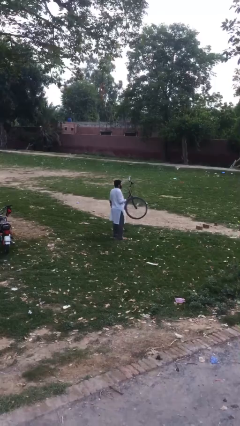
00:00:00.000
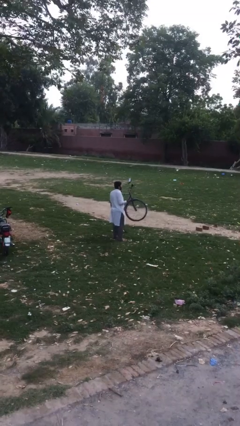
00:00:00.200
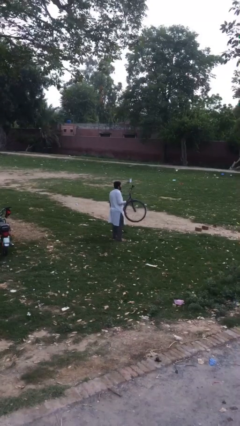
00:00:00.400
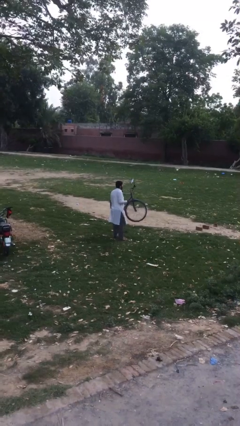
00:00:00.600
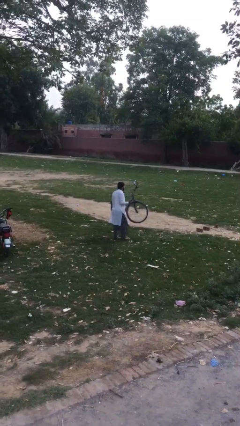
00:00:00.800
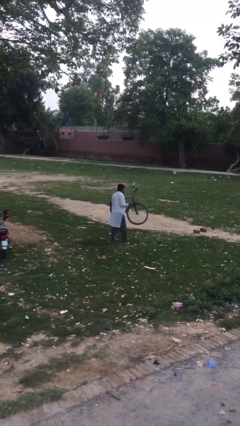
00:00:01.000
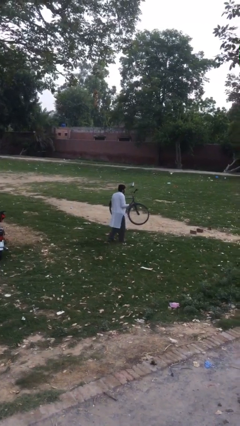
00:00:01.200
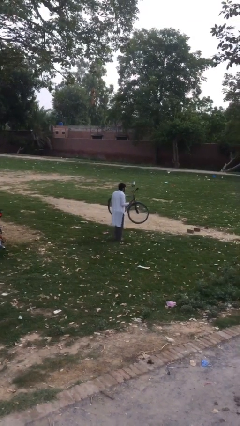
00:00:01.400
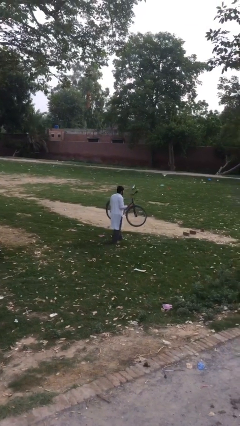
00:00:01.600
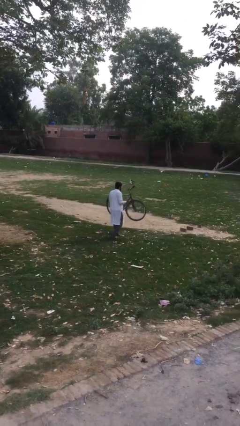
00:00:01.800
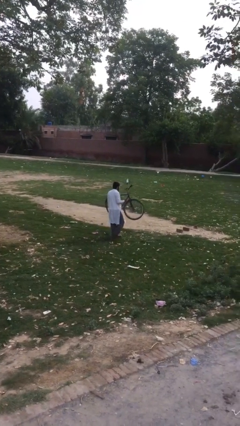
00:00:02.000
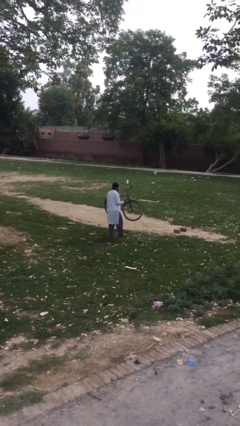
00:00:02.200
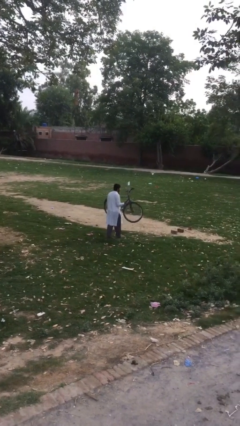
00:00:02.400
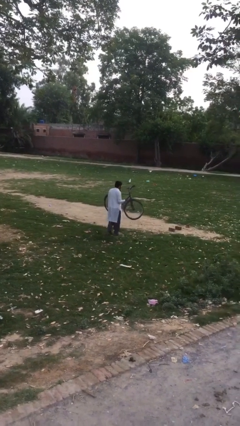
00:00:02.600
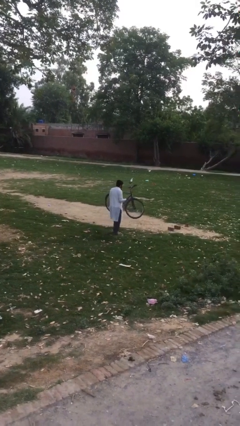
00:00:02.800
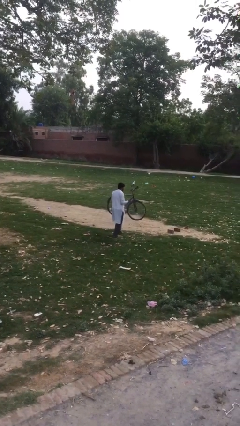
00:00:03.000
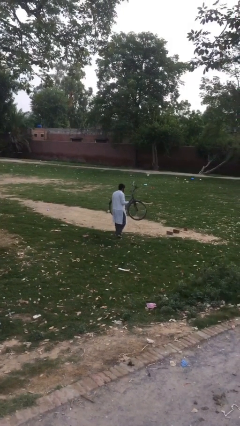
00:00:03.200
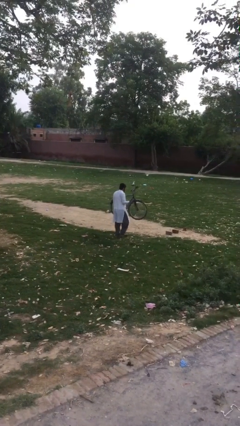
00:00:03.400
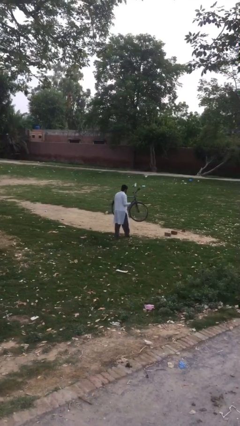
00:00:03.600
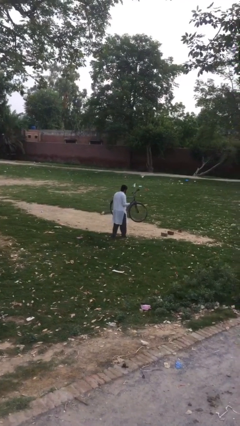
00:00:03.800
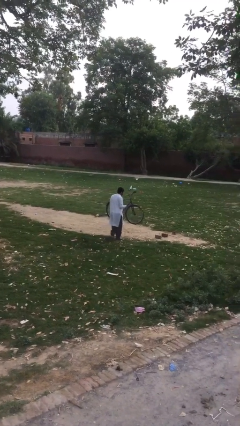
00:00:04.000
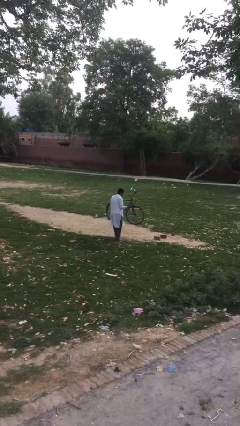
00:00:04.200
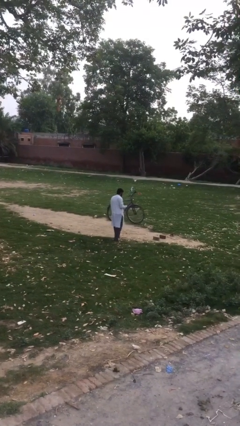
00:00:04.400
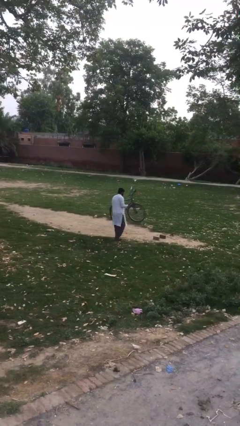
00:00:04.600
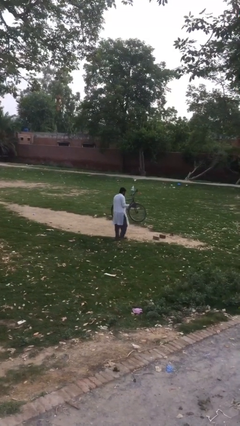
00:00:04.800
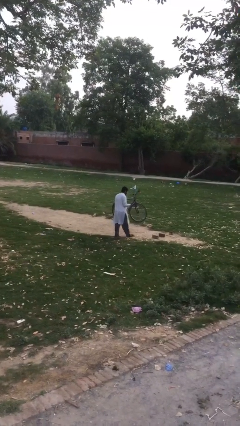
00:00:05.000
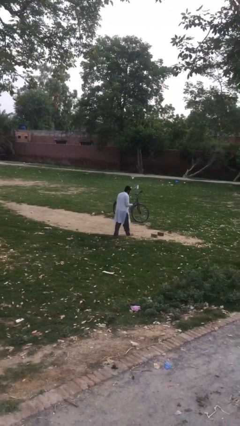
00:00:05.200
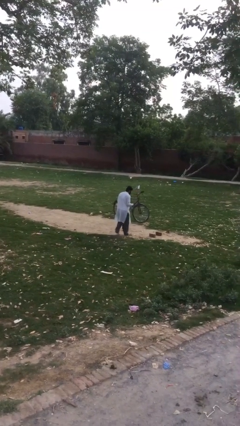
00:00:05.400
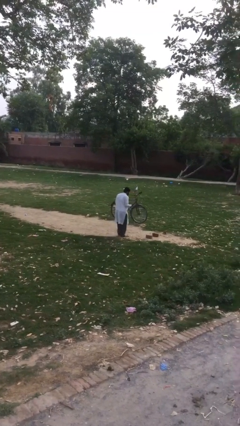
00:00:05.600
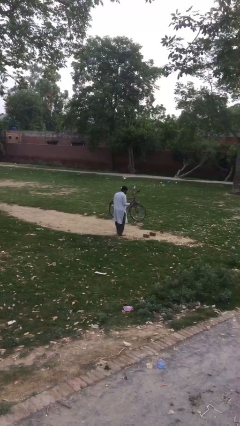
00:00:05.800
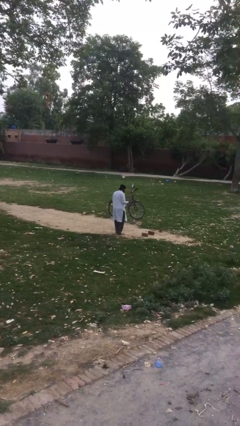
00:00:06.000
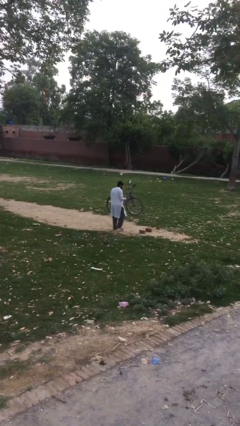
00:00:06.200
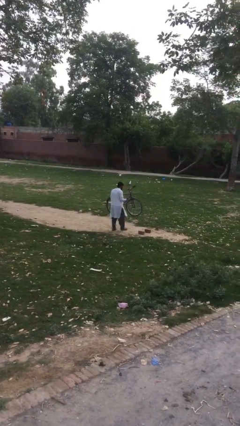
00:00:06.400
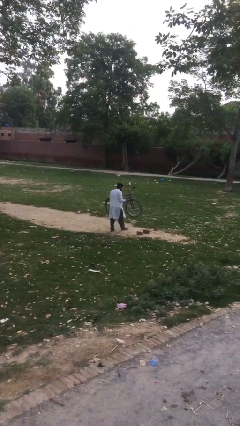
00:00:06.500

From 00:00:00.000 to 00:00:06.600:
person carries heavy object

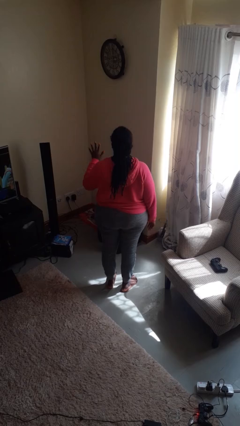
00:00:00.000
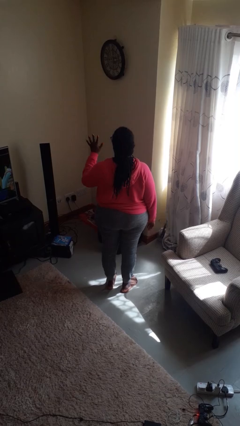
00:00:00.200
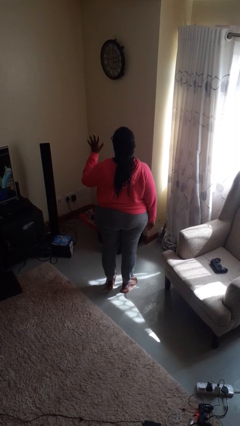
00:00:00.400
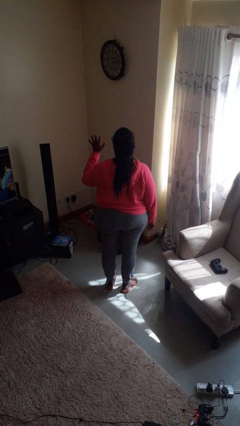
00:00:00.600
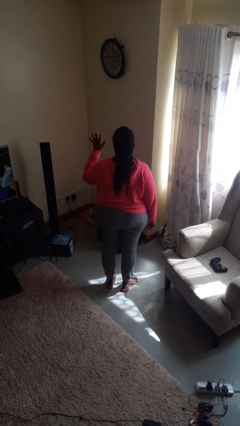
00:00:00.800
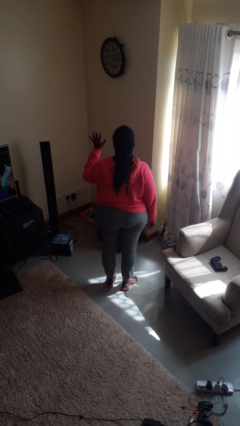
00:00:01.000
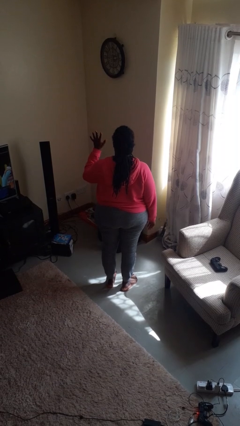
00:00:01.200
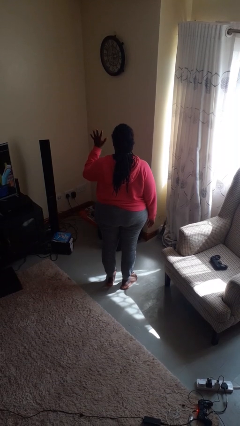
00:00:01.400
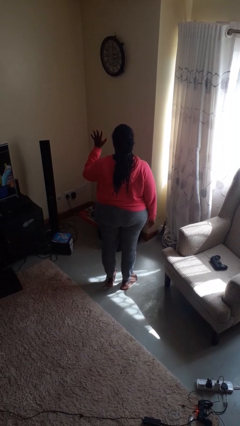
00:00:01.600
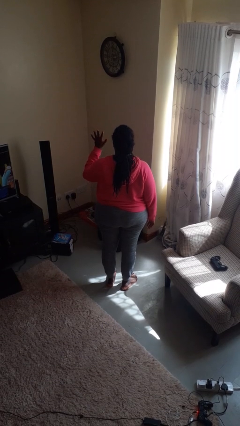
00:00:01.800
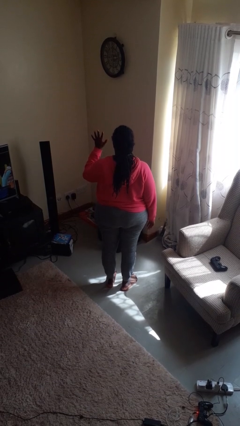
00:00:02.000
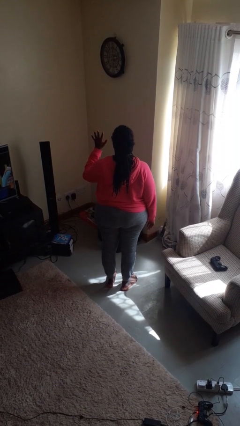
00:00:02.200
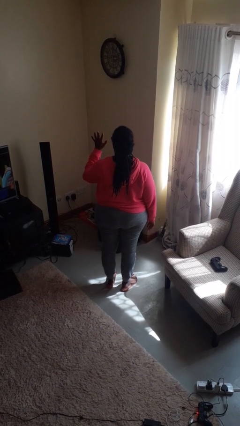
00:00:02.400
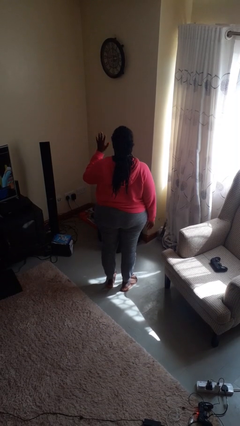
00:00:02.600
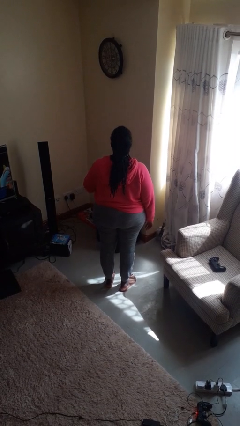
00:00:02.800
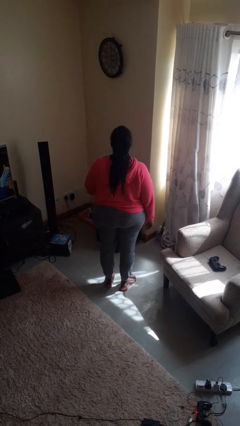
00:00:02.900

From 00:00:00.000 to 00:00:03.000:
person gestures number five

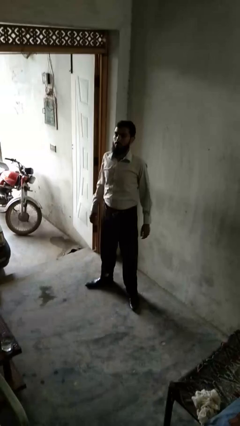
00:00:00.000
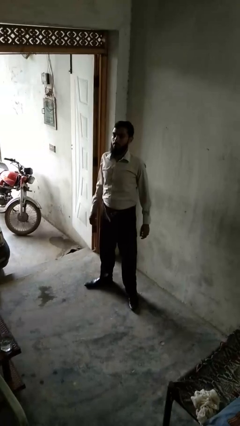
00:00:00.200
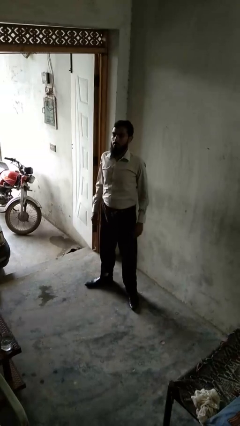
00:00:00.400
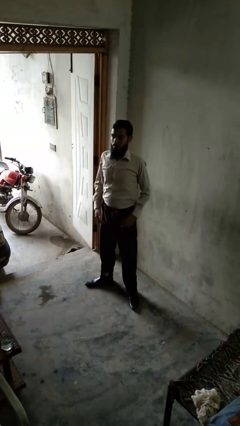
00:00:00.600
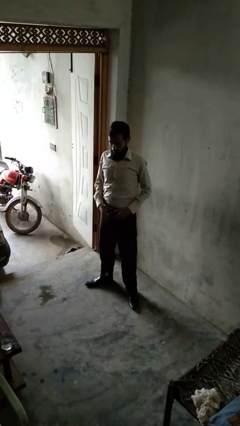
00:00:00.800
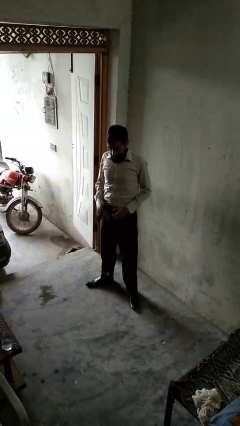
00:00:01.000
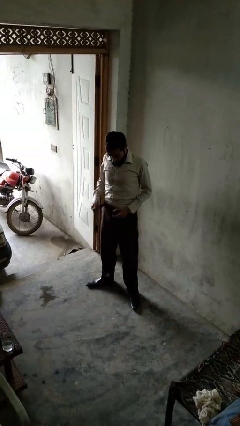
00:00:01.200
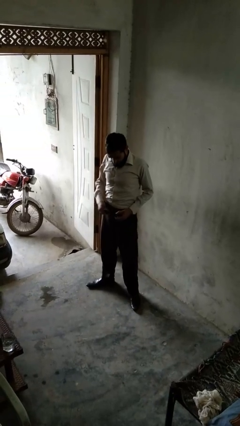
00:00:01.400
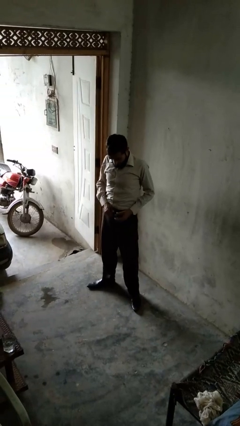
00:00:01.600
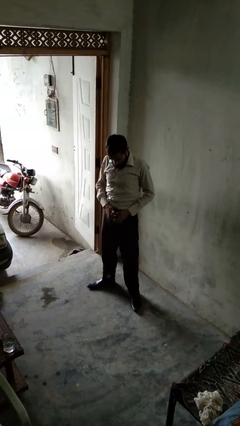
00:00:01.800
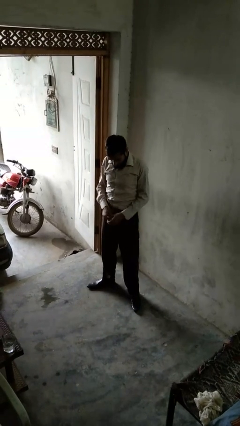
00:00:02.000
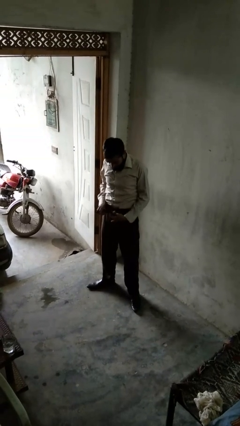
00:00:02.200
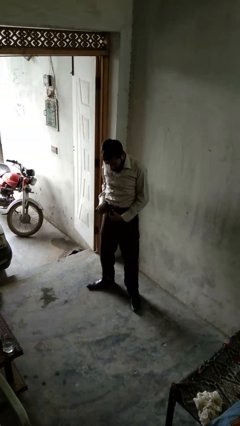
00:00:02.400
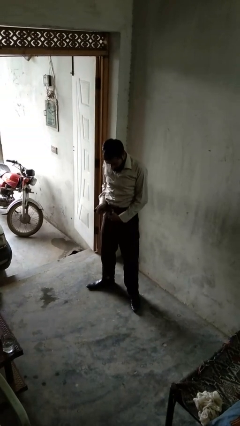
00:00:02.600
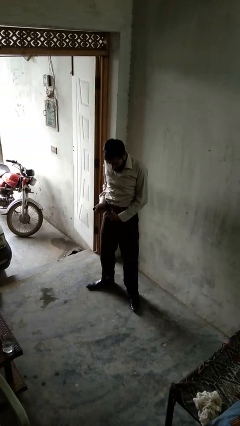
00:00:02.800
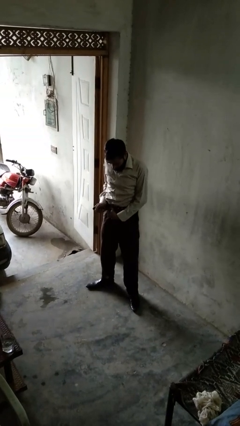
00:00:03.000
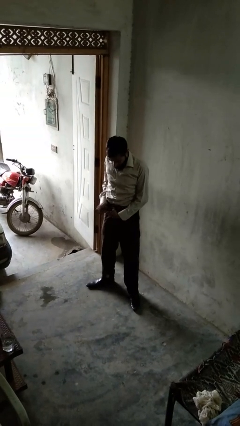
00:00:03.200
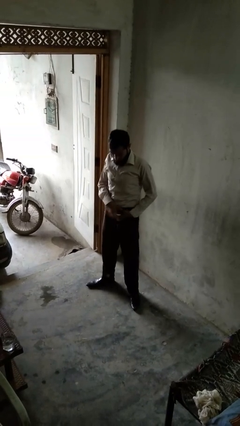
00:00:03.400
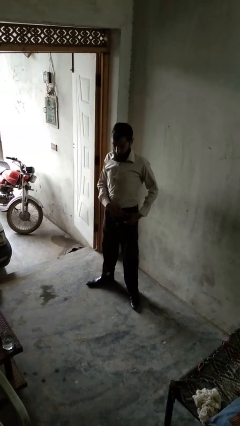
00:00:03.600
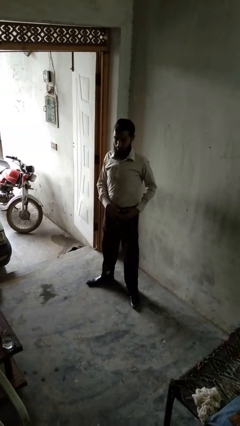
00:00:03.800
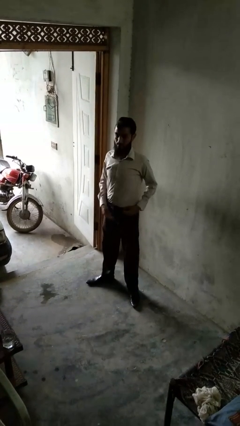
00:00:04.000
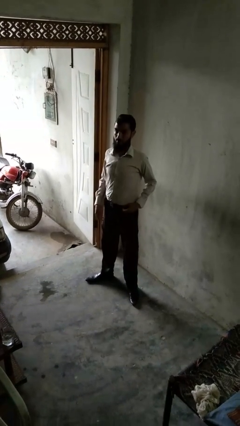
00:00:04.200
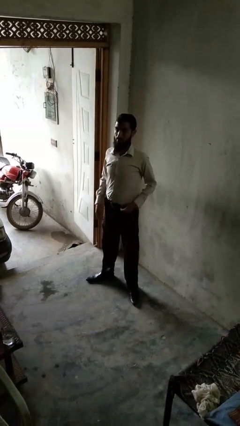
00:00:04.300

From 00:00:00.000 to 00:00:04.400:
person puts on belt

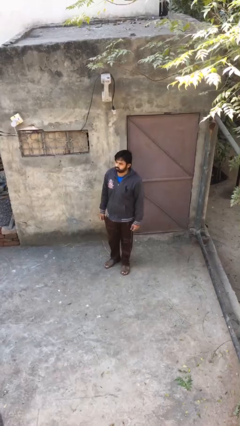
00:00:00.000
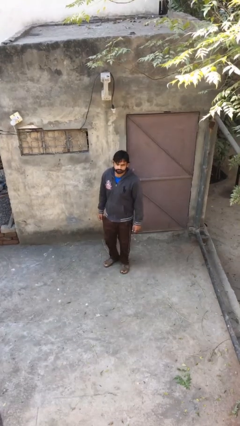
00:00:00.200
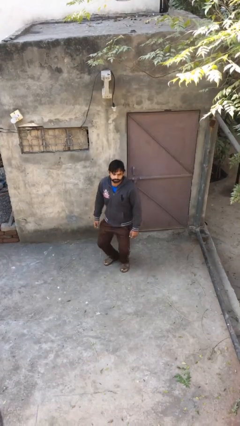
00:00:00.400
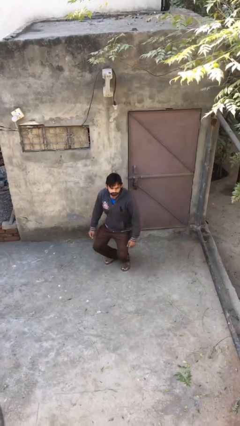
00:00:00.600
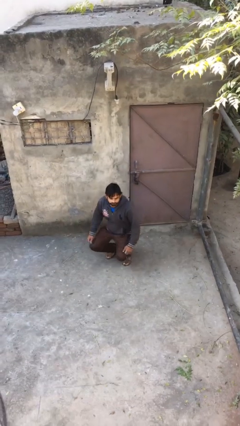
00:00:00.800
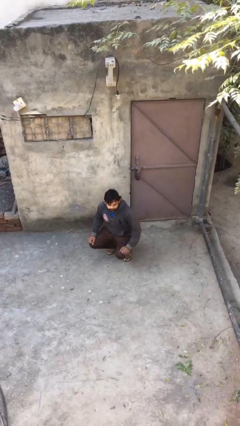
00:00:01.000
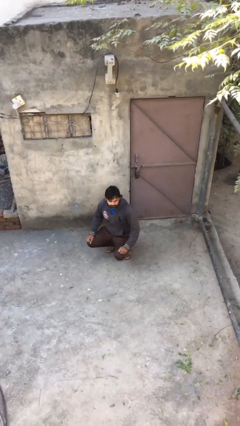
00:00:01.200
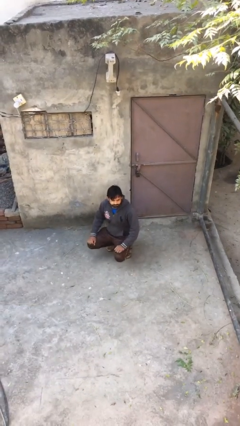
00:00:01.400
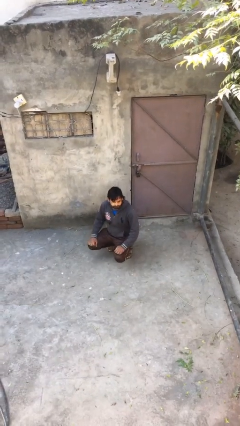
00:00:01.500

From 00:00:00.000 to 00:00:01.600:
person sits down

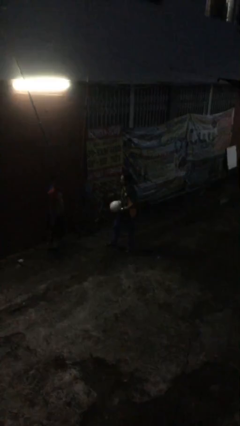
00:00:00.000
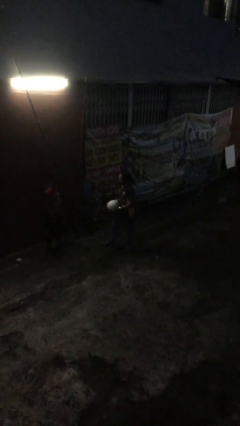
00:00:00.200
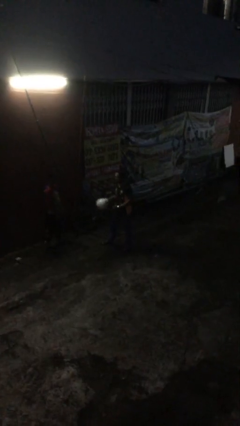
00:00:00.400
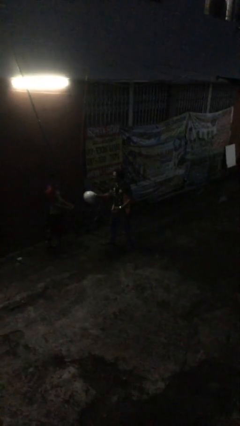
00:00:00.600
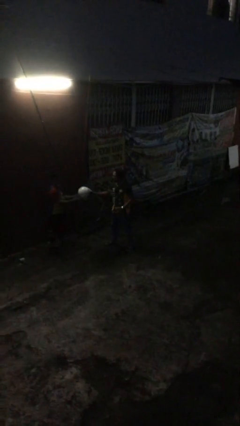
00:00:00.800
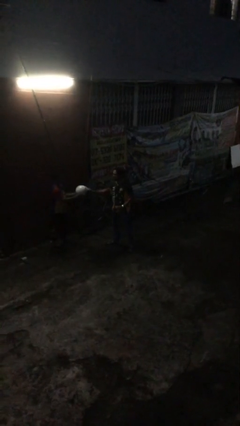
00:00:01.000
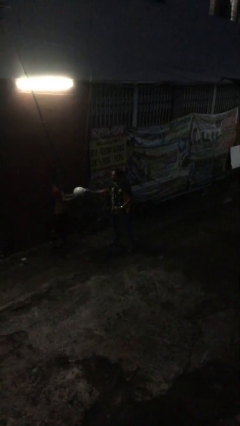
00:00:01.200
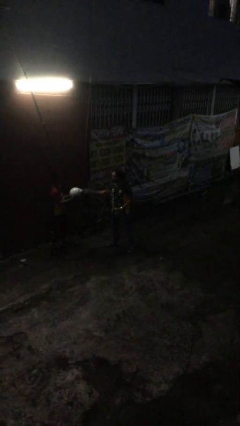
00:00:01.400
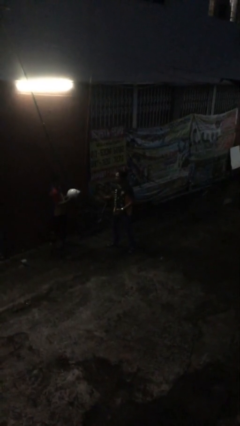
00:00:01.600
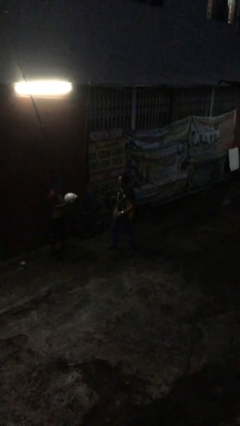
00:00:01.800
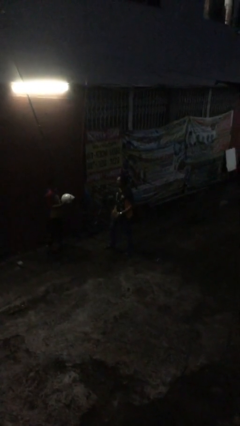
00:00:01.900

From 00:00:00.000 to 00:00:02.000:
person transfers object to person
